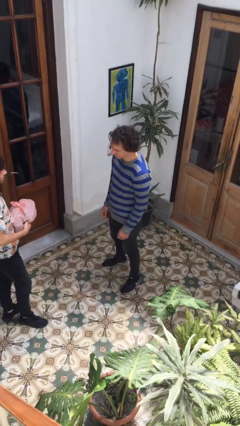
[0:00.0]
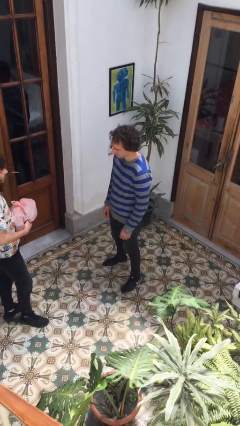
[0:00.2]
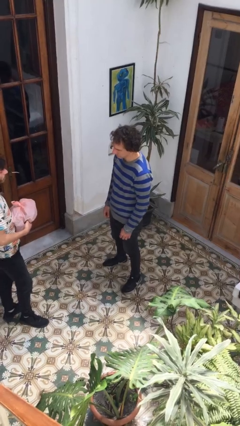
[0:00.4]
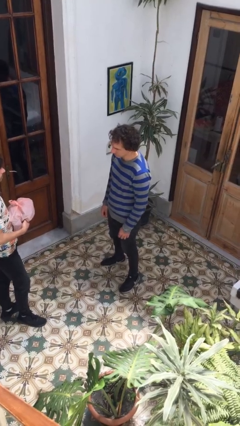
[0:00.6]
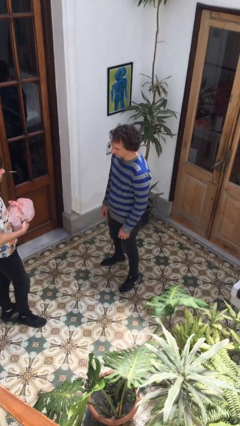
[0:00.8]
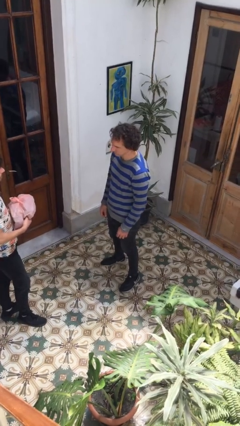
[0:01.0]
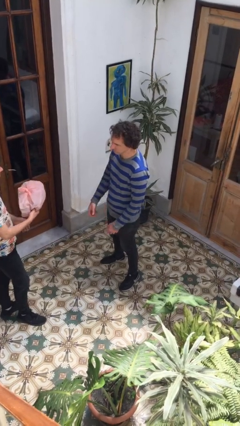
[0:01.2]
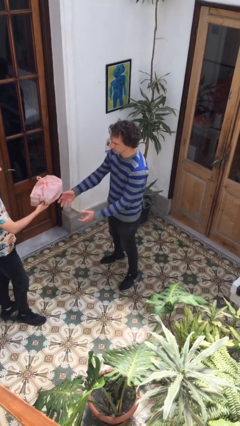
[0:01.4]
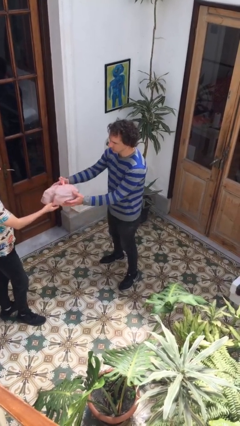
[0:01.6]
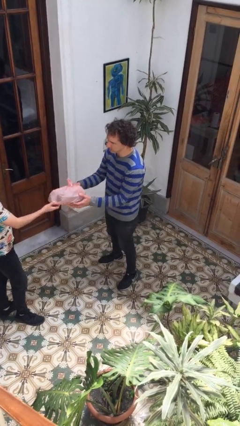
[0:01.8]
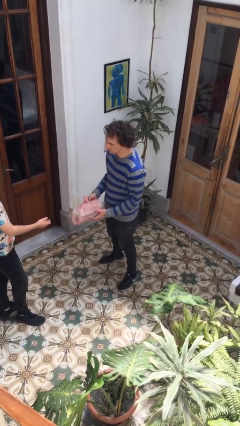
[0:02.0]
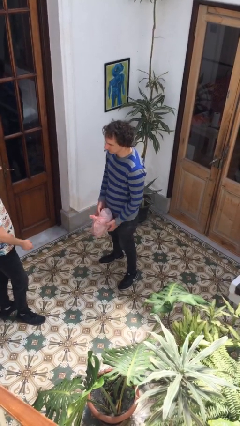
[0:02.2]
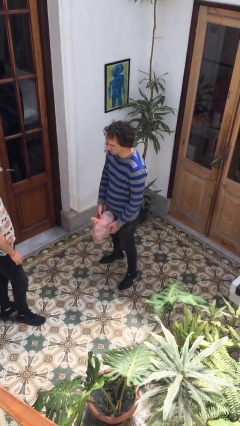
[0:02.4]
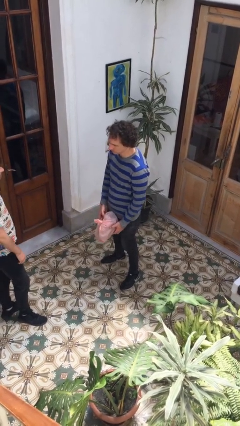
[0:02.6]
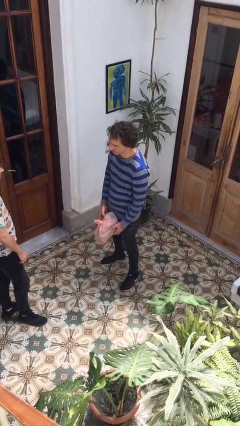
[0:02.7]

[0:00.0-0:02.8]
person transfers object to person

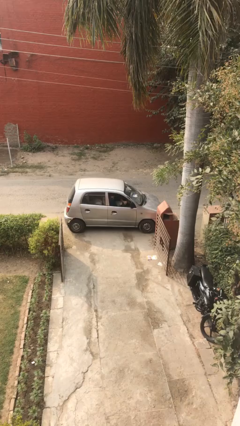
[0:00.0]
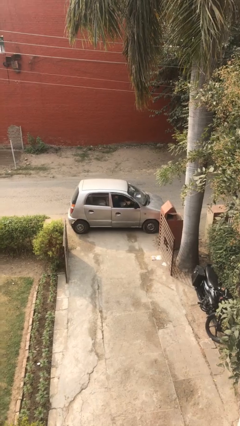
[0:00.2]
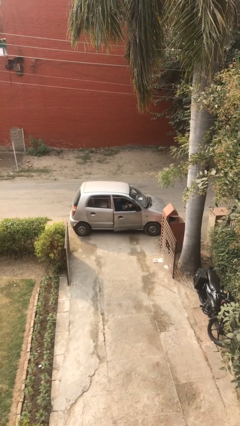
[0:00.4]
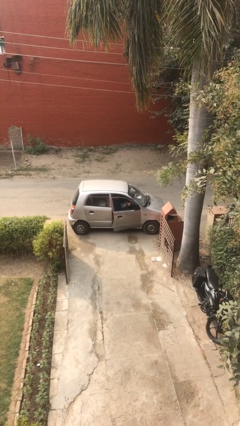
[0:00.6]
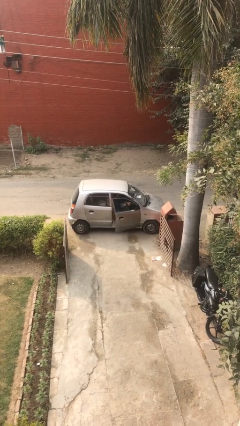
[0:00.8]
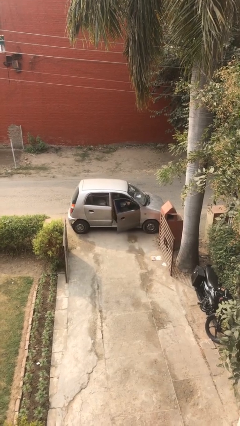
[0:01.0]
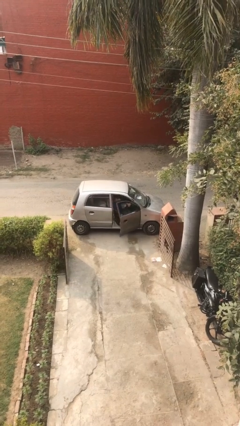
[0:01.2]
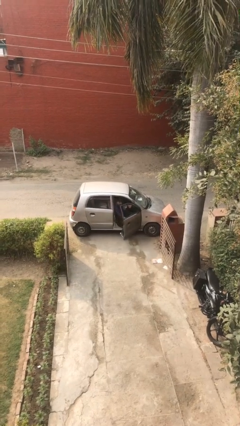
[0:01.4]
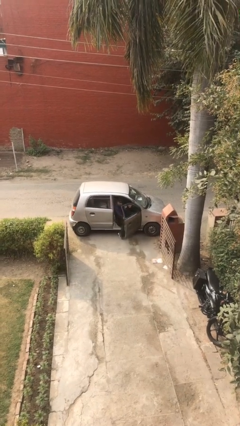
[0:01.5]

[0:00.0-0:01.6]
person opens car door

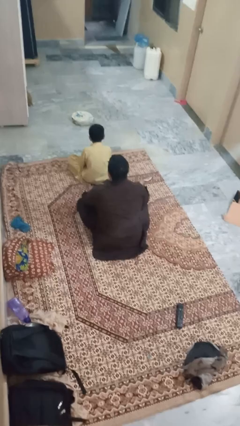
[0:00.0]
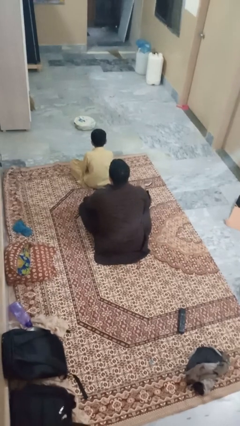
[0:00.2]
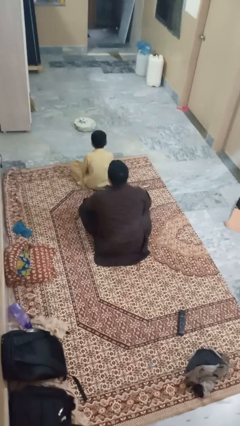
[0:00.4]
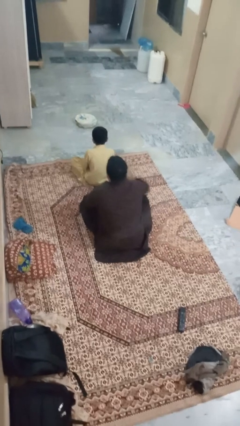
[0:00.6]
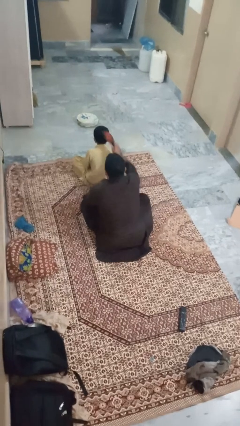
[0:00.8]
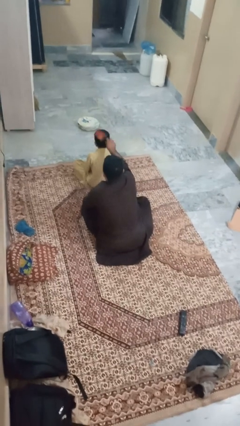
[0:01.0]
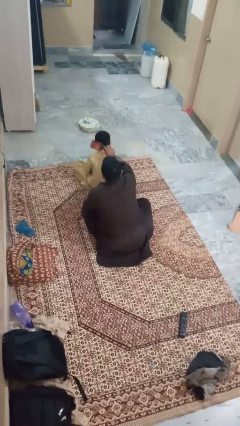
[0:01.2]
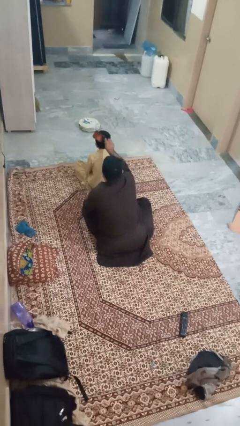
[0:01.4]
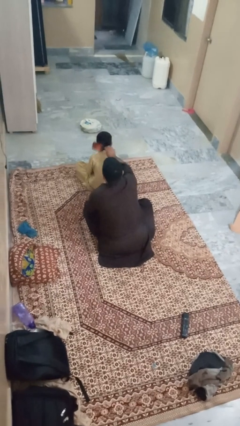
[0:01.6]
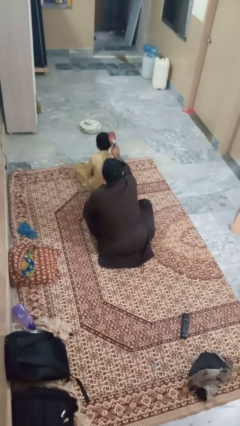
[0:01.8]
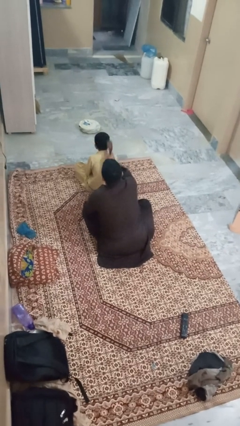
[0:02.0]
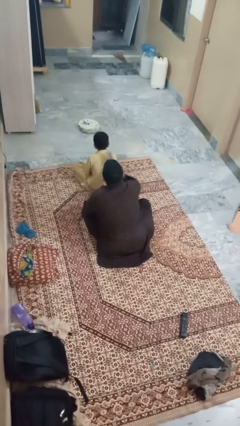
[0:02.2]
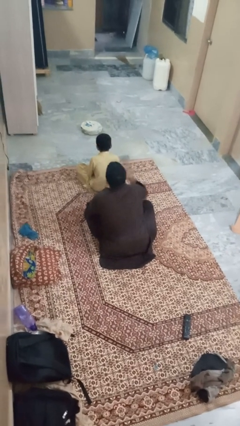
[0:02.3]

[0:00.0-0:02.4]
person brushes hair of person

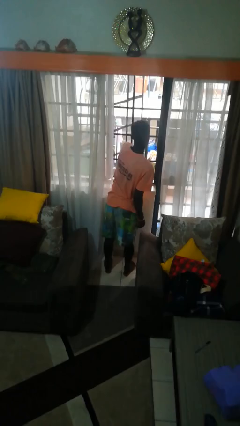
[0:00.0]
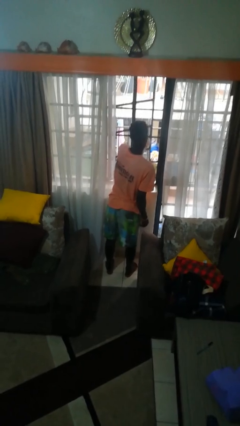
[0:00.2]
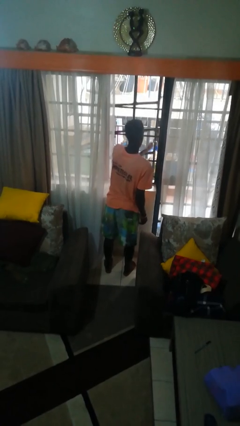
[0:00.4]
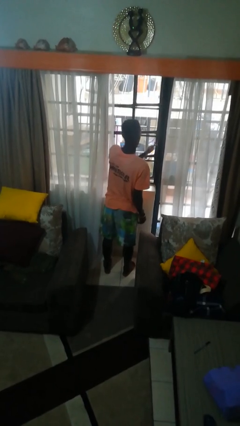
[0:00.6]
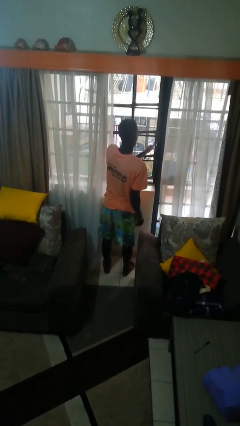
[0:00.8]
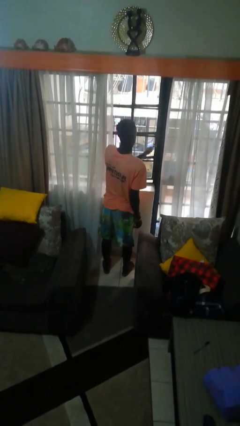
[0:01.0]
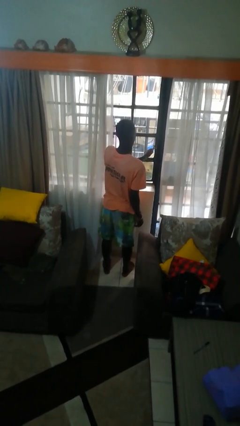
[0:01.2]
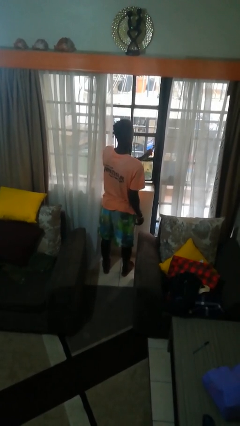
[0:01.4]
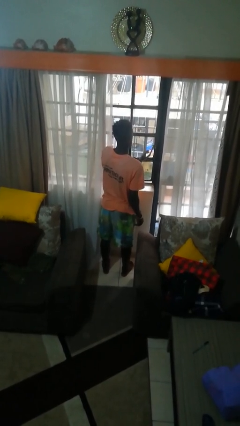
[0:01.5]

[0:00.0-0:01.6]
person closes home window

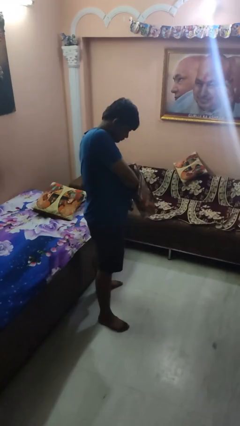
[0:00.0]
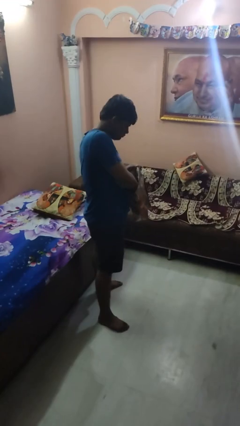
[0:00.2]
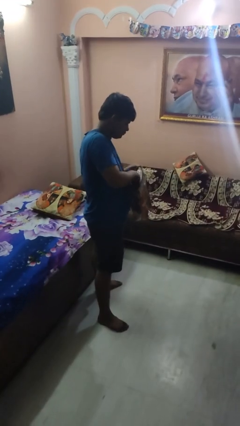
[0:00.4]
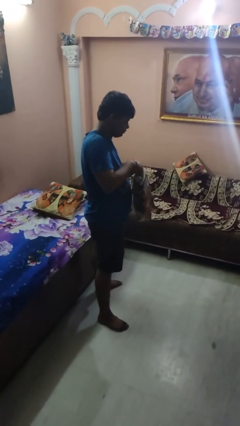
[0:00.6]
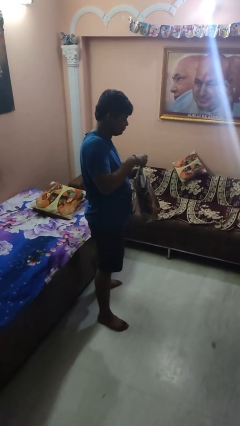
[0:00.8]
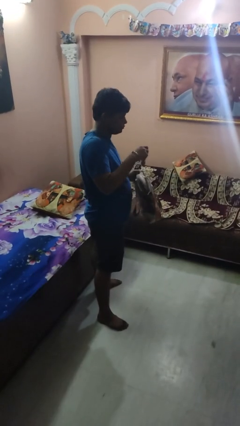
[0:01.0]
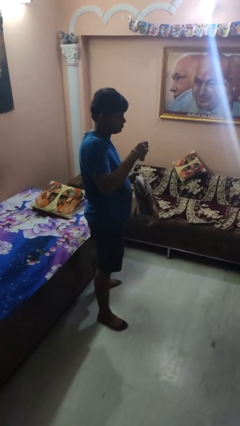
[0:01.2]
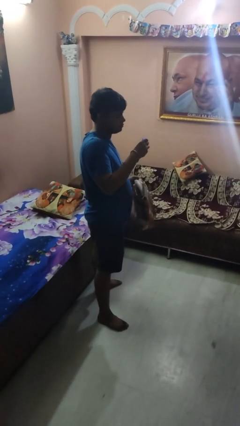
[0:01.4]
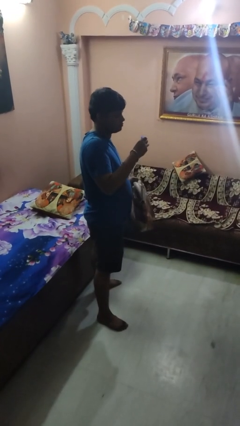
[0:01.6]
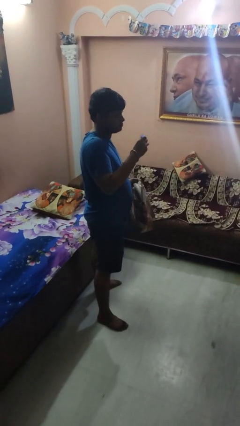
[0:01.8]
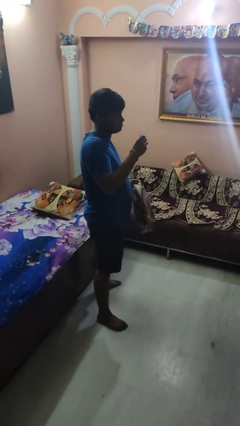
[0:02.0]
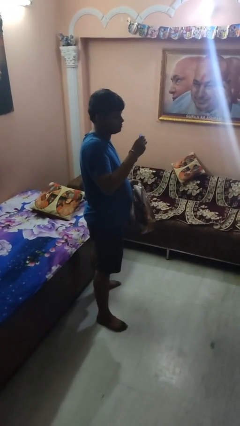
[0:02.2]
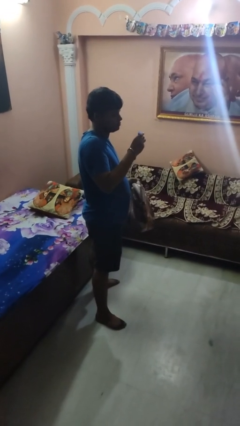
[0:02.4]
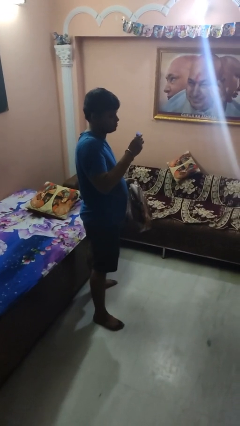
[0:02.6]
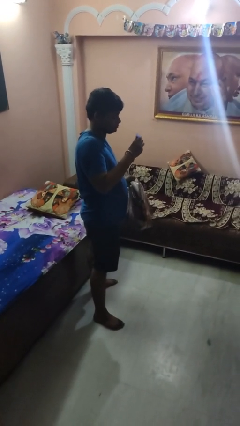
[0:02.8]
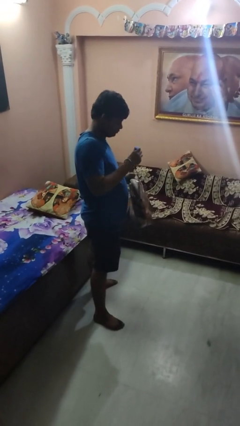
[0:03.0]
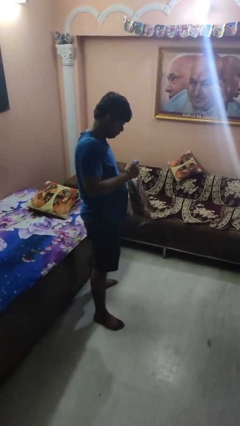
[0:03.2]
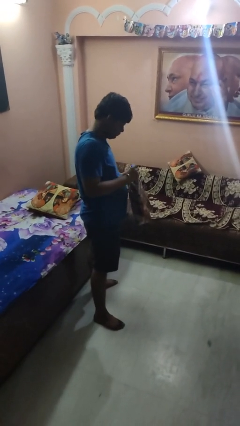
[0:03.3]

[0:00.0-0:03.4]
person takes object from purse

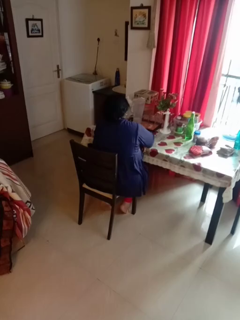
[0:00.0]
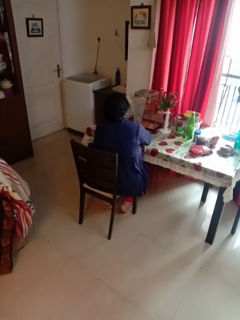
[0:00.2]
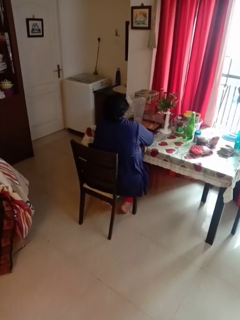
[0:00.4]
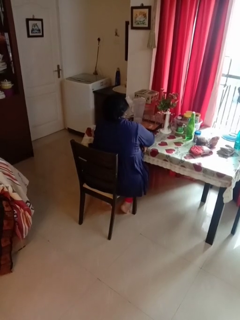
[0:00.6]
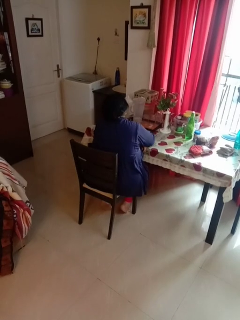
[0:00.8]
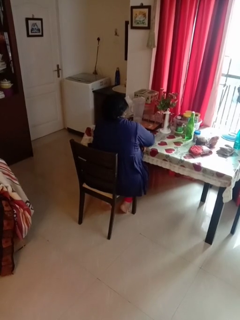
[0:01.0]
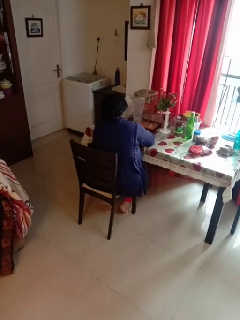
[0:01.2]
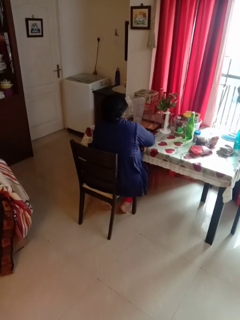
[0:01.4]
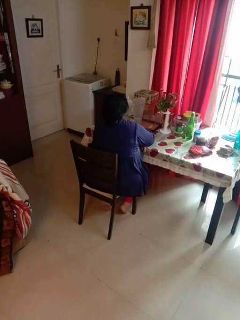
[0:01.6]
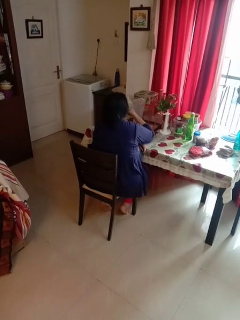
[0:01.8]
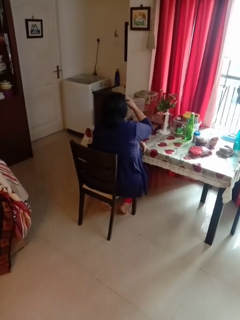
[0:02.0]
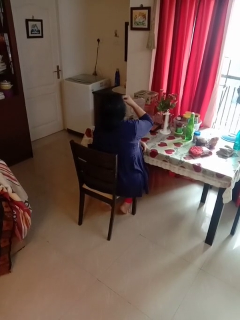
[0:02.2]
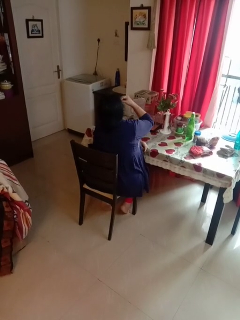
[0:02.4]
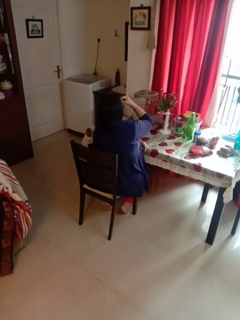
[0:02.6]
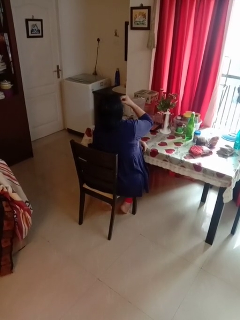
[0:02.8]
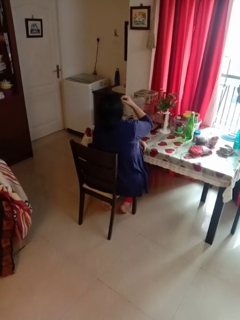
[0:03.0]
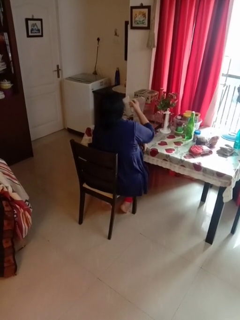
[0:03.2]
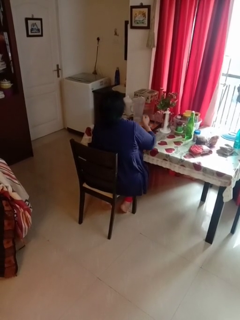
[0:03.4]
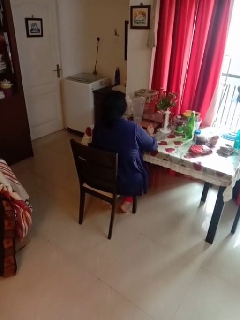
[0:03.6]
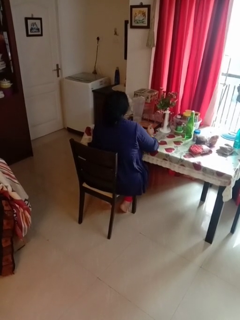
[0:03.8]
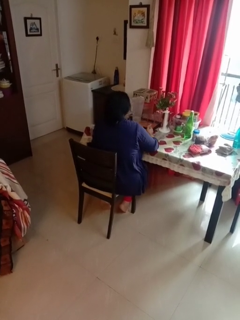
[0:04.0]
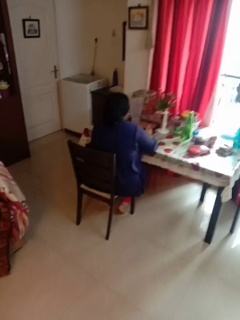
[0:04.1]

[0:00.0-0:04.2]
person eats with hands

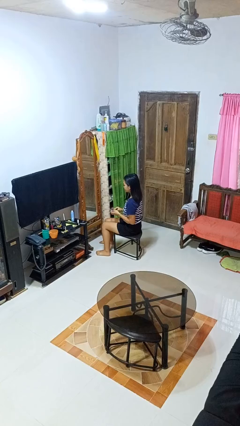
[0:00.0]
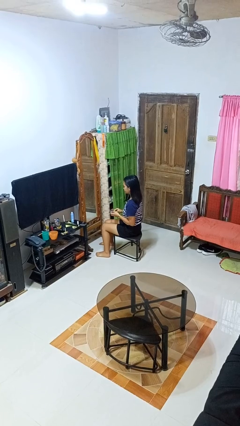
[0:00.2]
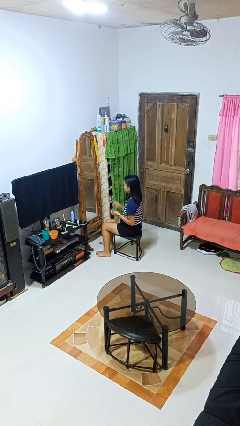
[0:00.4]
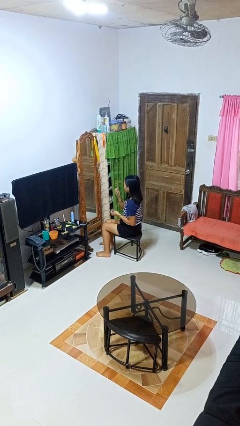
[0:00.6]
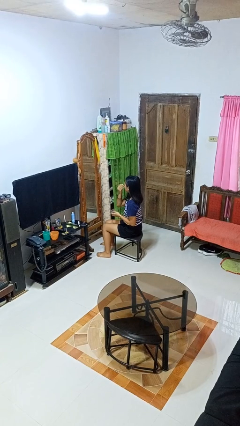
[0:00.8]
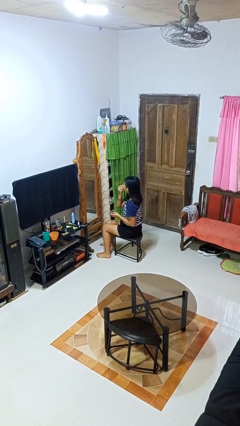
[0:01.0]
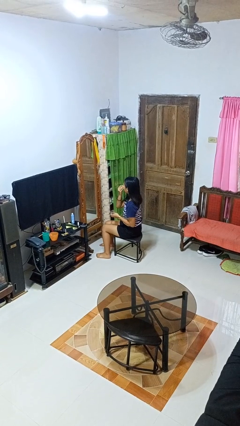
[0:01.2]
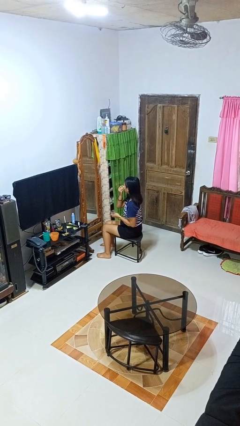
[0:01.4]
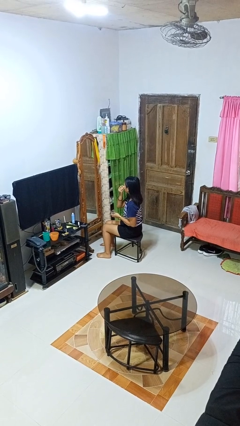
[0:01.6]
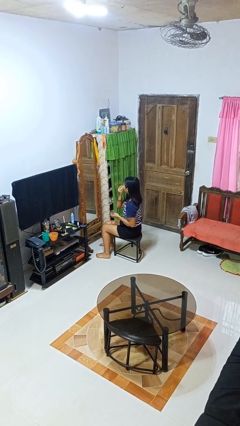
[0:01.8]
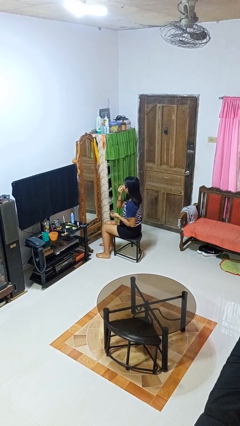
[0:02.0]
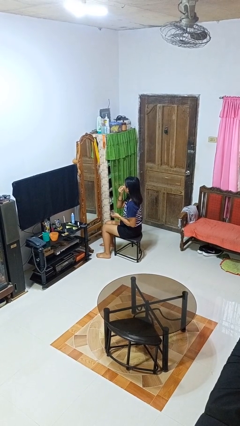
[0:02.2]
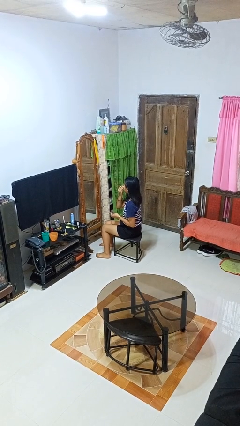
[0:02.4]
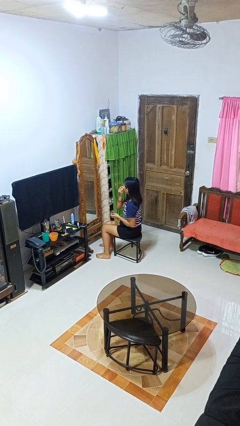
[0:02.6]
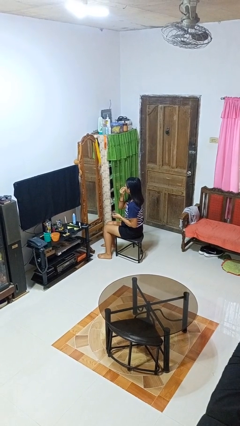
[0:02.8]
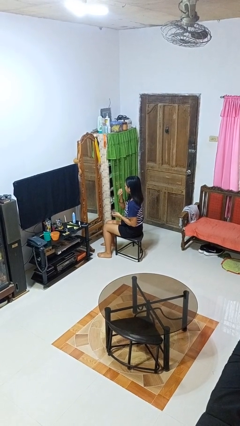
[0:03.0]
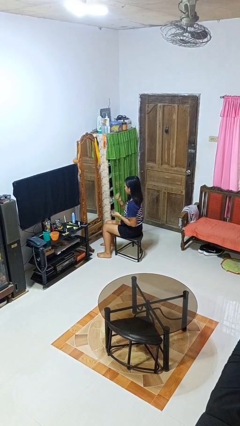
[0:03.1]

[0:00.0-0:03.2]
person applies eye makeup
